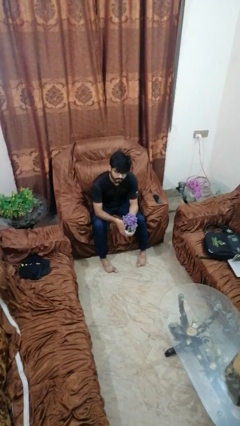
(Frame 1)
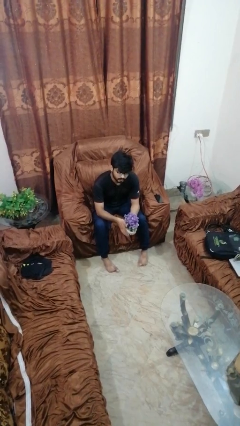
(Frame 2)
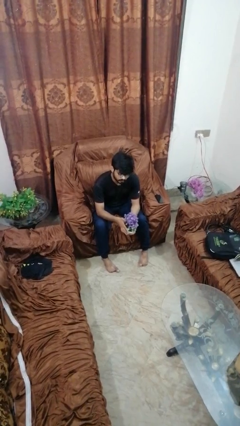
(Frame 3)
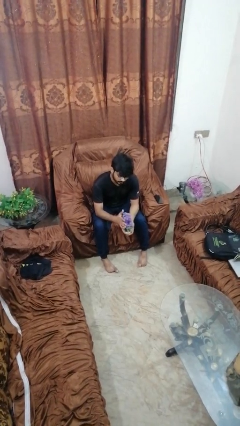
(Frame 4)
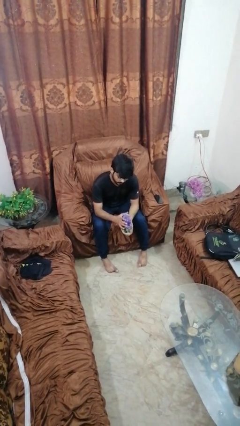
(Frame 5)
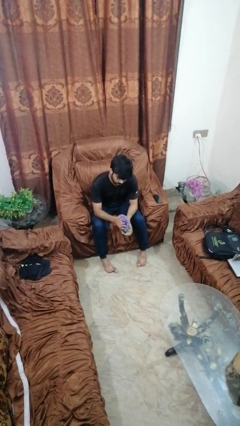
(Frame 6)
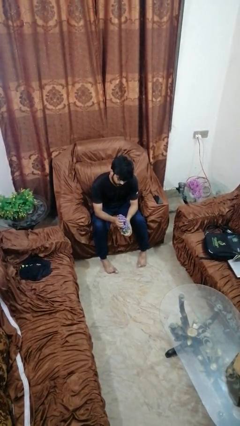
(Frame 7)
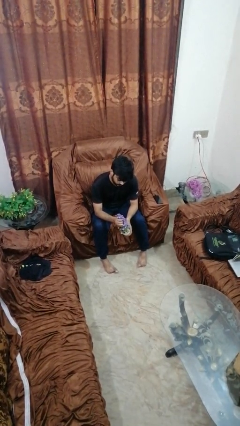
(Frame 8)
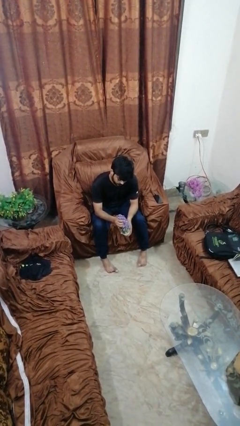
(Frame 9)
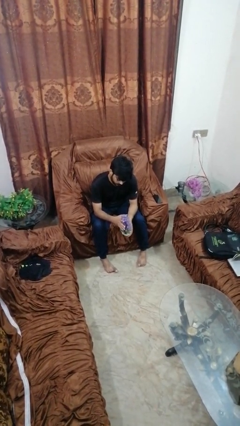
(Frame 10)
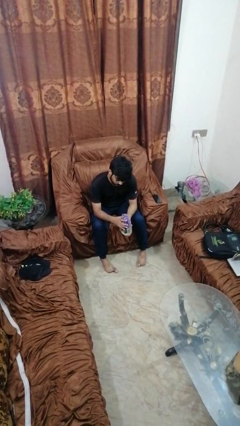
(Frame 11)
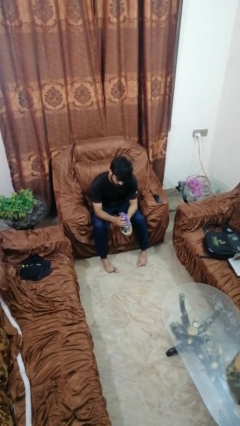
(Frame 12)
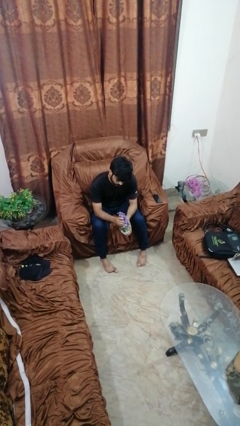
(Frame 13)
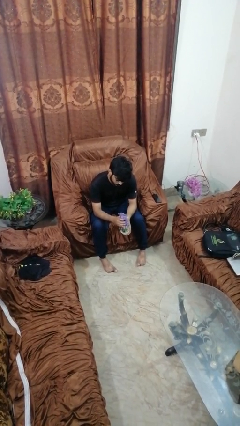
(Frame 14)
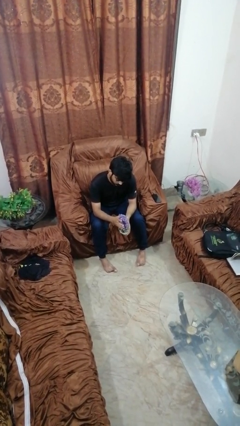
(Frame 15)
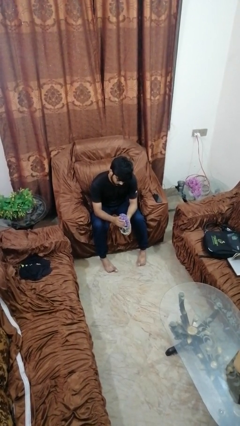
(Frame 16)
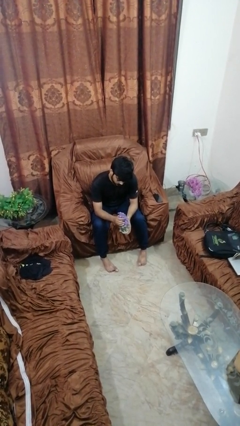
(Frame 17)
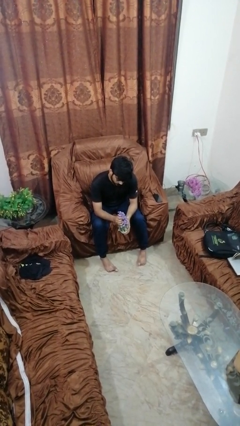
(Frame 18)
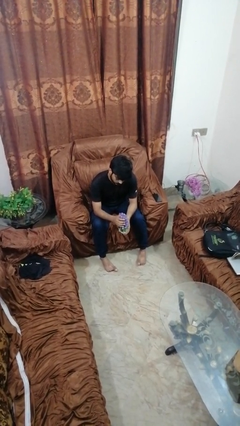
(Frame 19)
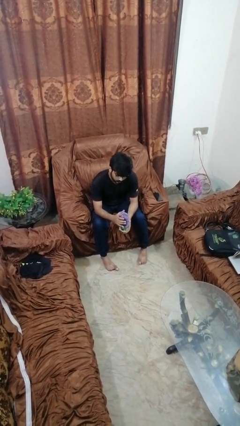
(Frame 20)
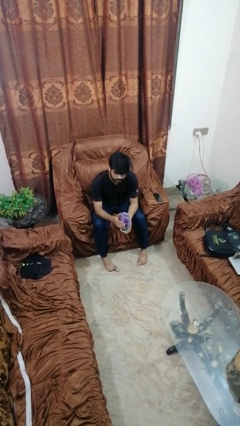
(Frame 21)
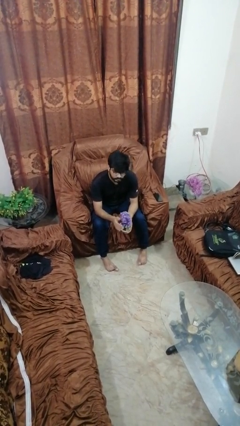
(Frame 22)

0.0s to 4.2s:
person squeezes object

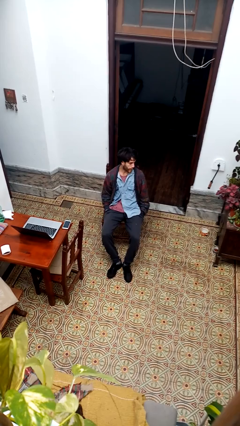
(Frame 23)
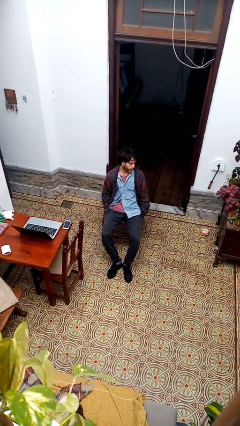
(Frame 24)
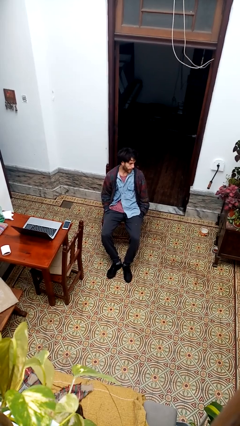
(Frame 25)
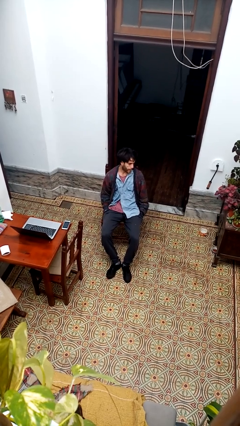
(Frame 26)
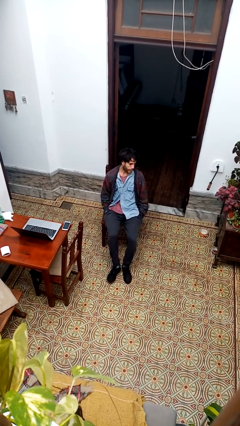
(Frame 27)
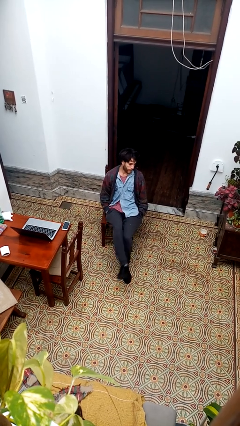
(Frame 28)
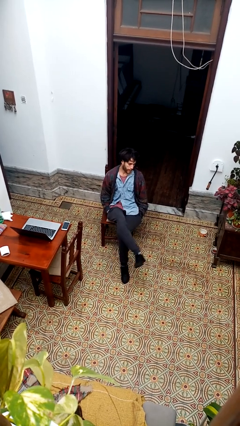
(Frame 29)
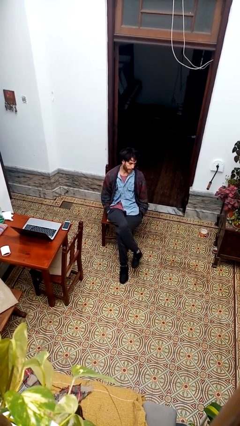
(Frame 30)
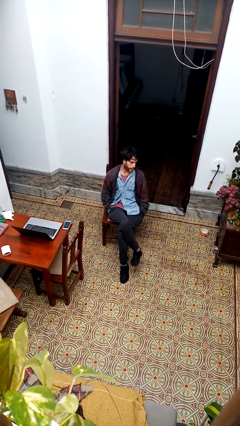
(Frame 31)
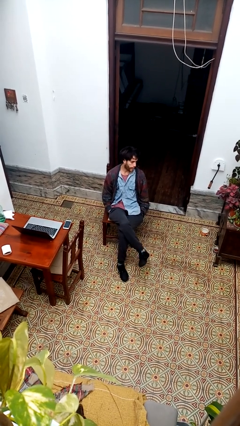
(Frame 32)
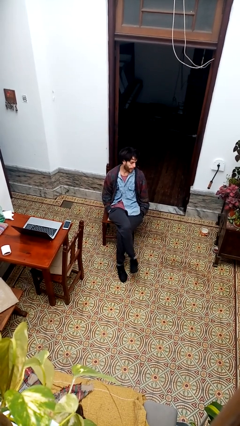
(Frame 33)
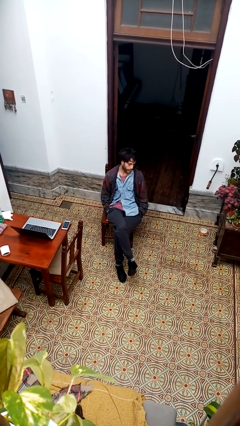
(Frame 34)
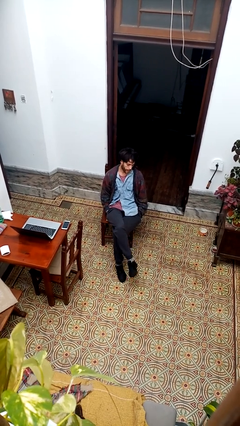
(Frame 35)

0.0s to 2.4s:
person crosses legs

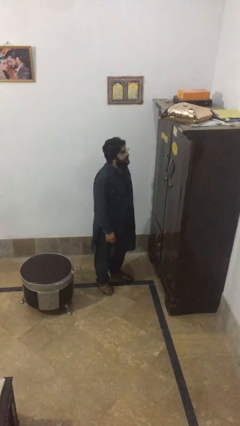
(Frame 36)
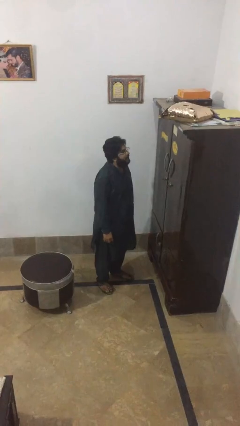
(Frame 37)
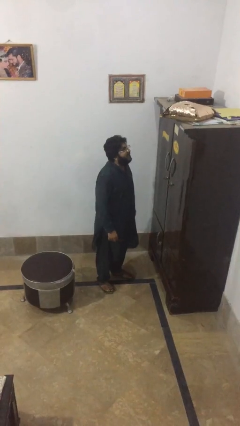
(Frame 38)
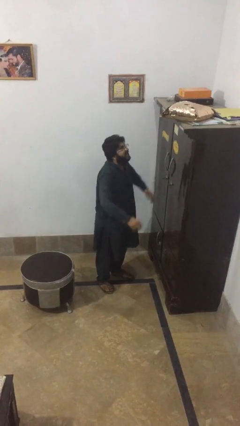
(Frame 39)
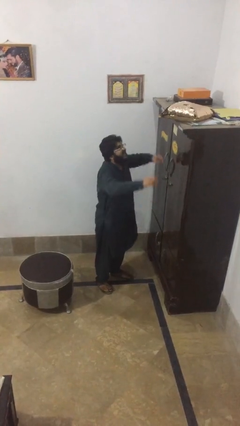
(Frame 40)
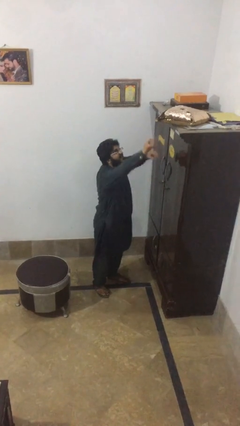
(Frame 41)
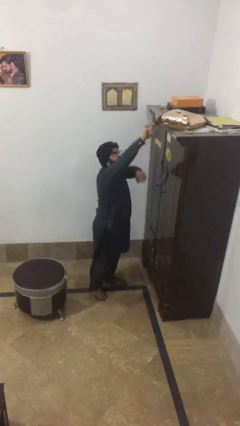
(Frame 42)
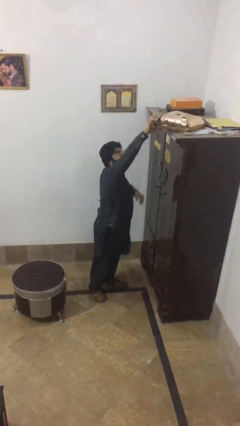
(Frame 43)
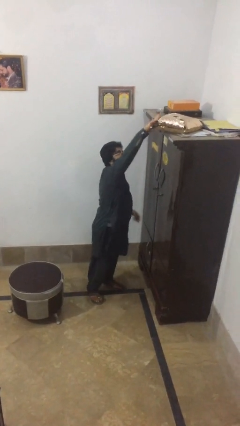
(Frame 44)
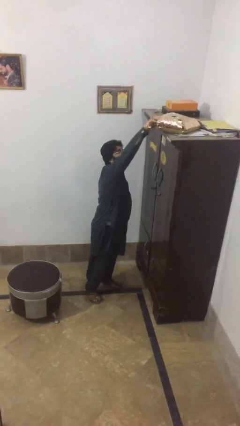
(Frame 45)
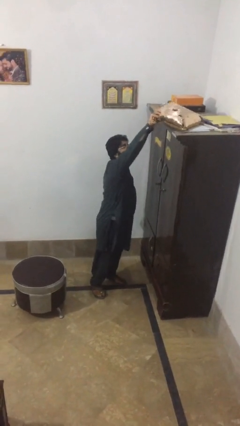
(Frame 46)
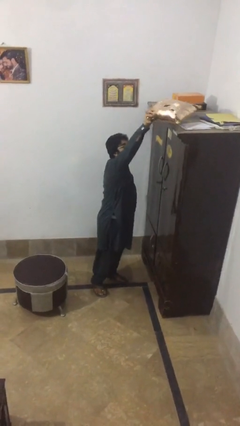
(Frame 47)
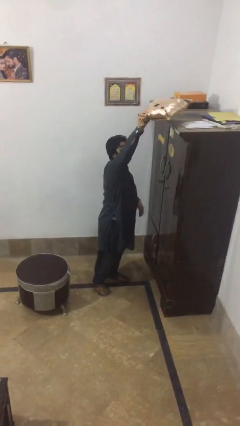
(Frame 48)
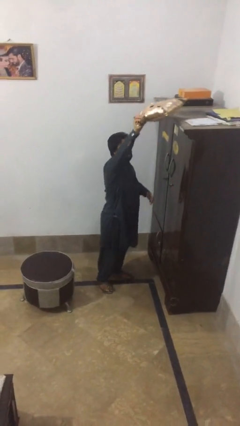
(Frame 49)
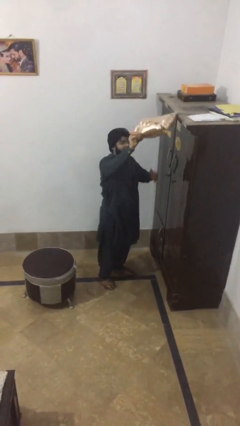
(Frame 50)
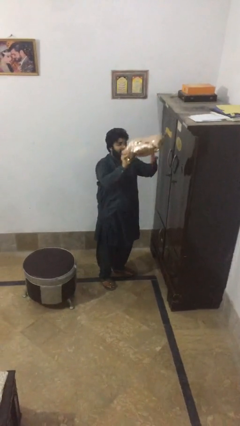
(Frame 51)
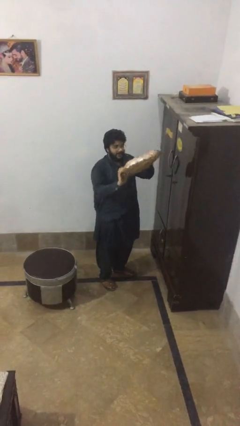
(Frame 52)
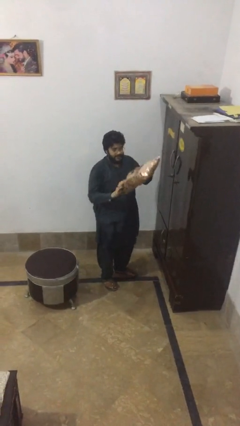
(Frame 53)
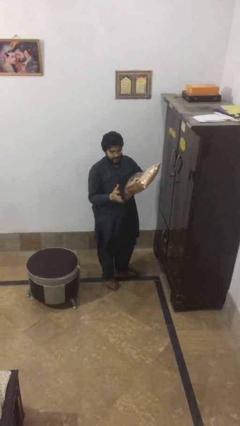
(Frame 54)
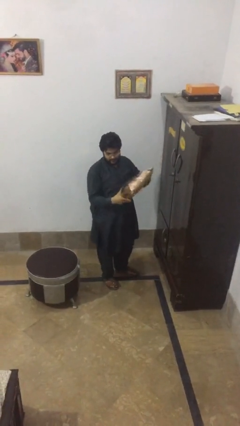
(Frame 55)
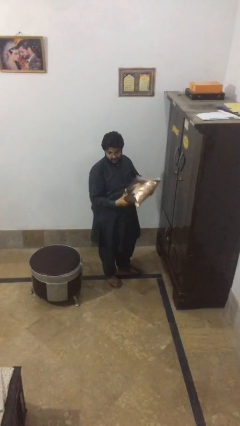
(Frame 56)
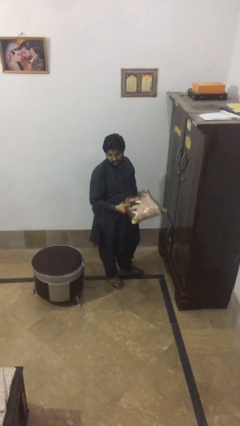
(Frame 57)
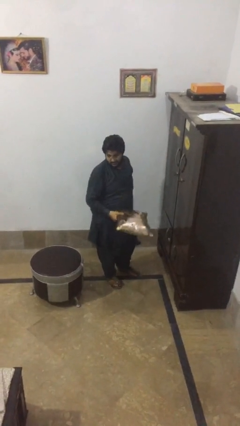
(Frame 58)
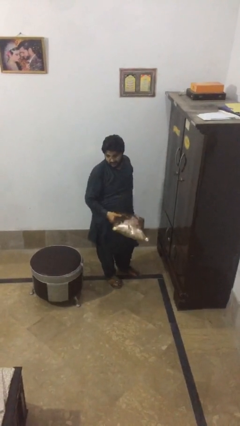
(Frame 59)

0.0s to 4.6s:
person picks up object from shelf

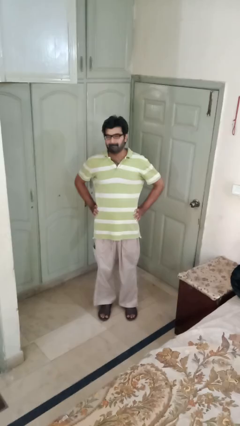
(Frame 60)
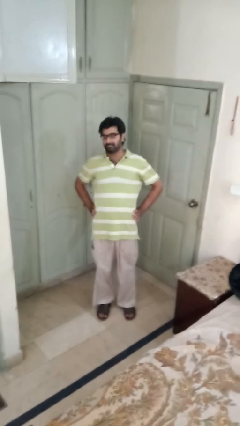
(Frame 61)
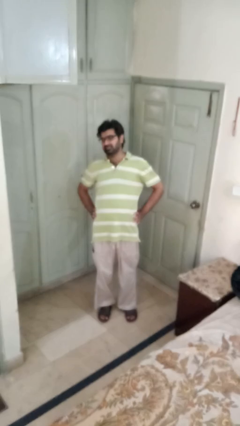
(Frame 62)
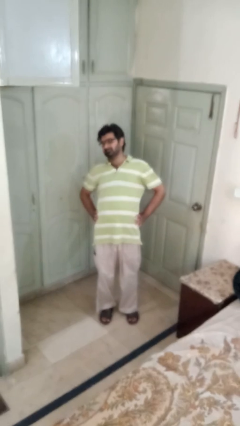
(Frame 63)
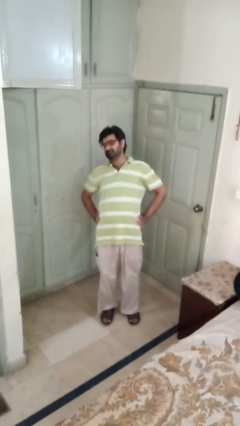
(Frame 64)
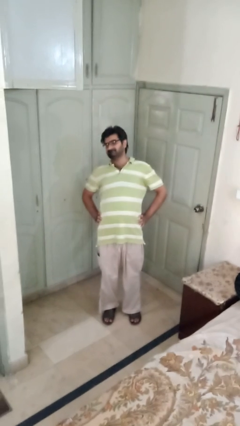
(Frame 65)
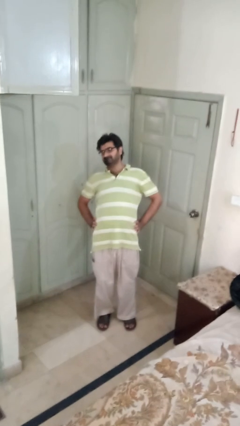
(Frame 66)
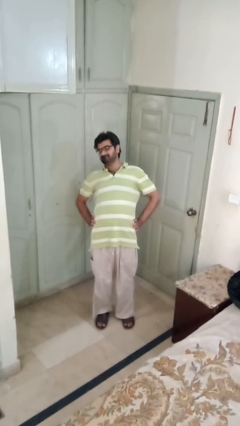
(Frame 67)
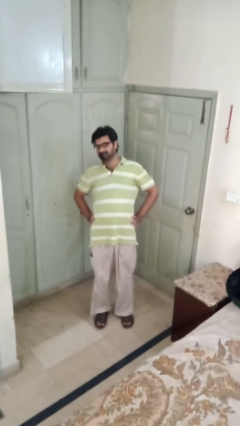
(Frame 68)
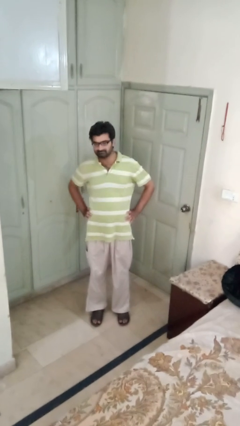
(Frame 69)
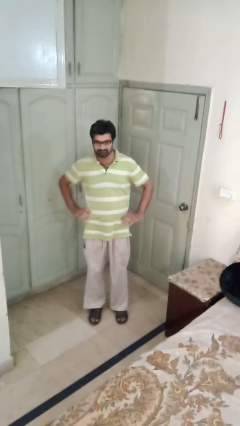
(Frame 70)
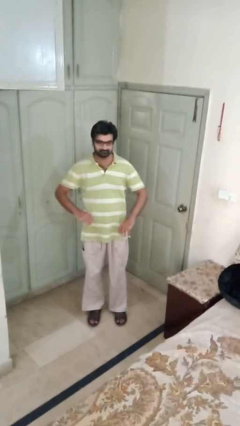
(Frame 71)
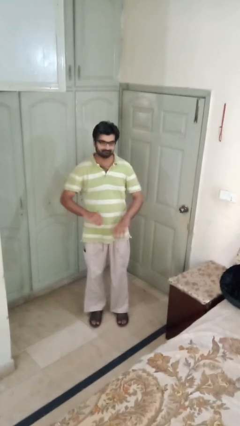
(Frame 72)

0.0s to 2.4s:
person stretches back

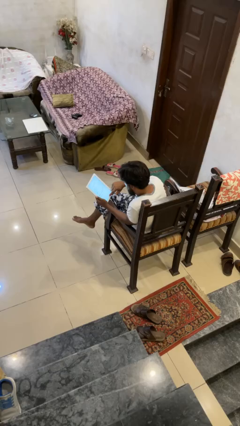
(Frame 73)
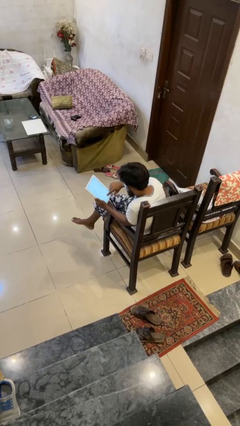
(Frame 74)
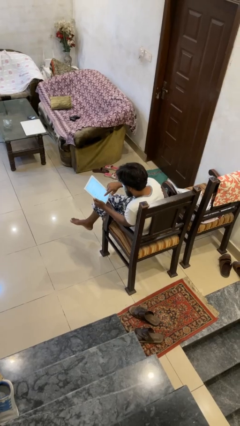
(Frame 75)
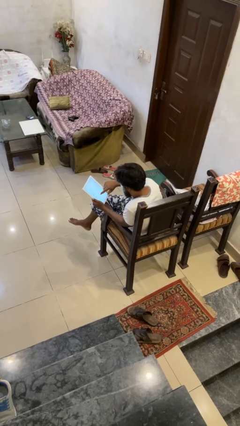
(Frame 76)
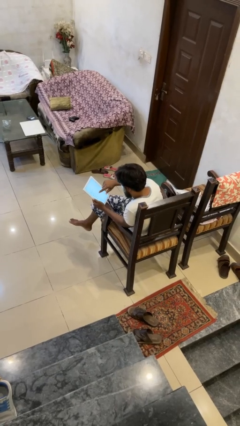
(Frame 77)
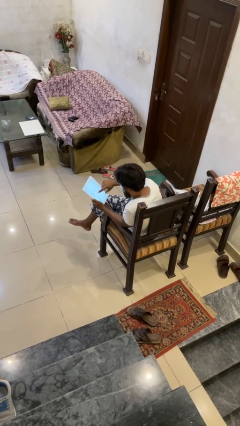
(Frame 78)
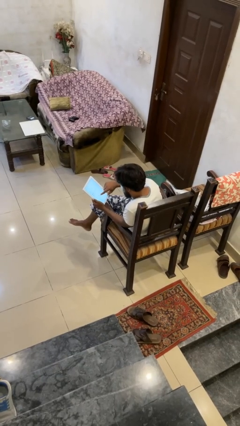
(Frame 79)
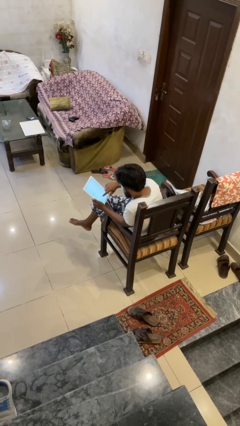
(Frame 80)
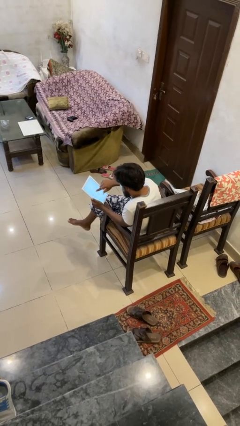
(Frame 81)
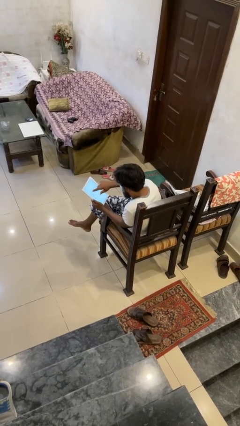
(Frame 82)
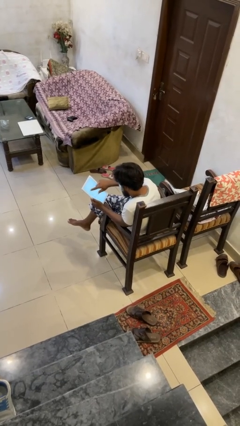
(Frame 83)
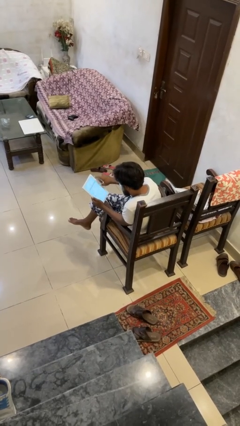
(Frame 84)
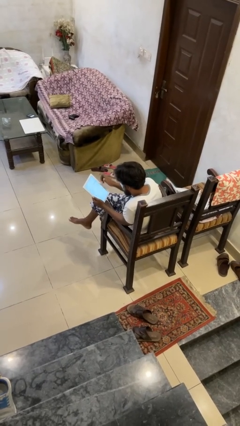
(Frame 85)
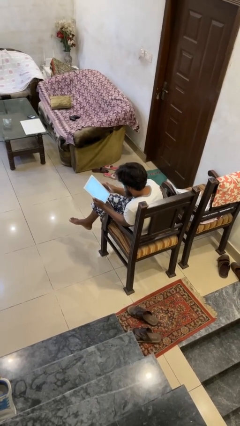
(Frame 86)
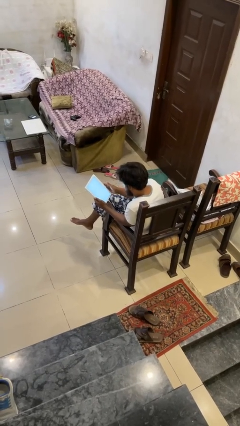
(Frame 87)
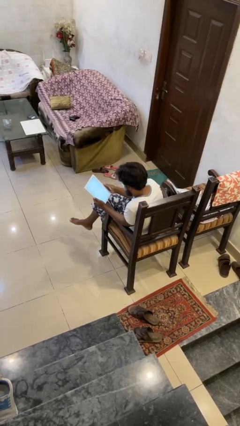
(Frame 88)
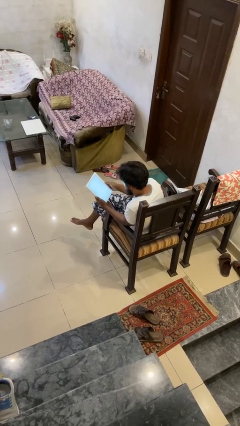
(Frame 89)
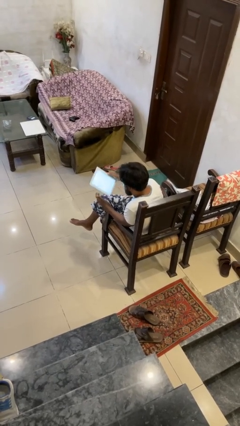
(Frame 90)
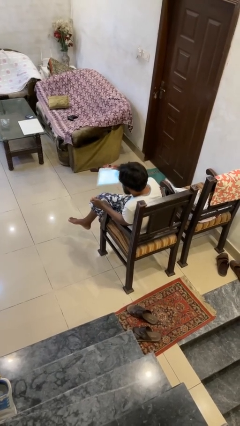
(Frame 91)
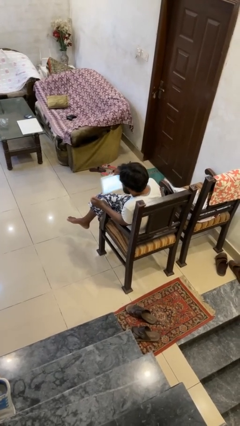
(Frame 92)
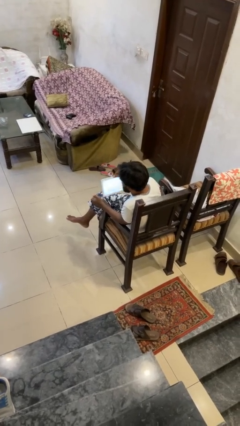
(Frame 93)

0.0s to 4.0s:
person interacts with tablet
